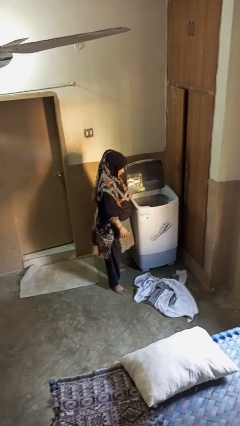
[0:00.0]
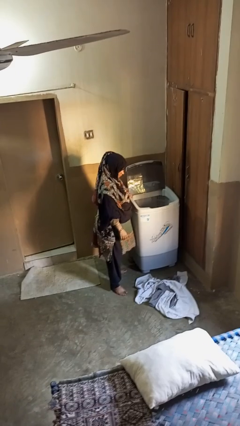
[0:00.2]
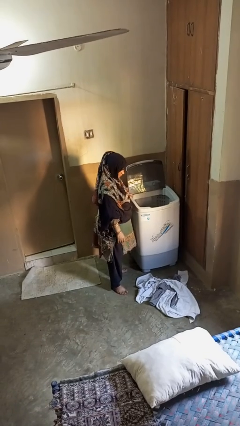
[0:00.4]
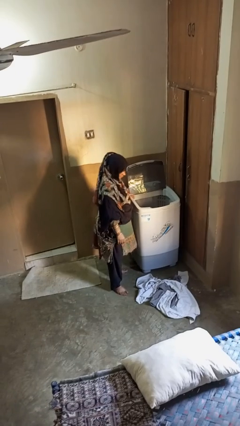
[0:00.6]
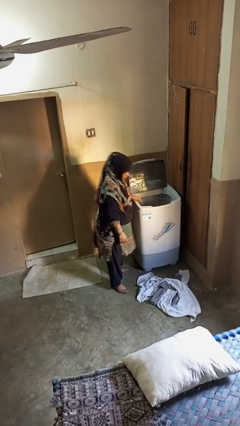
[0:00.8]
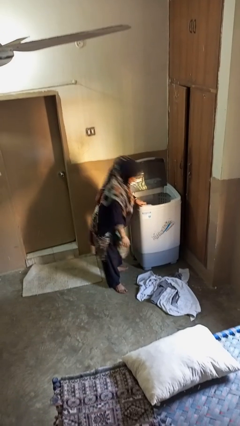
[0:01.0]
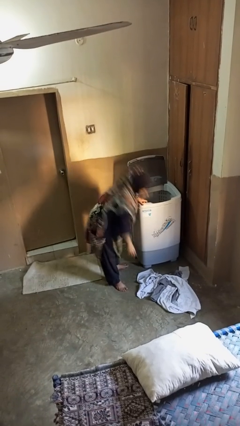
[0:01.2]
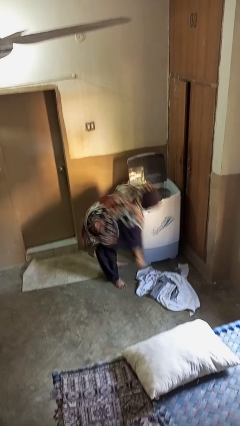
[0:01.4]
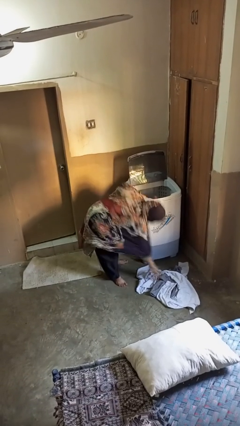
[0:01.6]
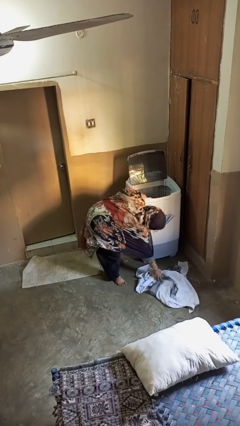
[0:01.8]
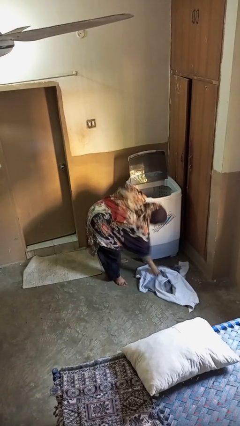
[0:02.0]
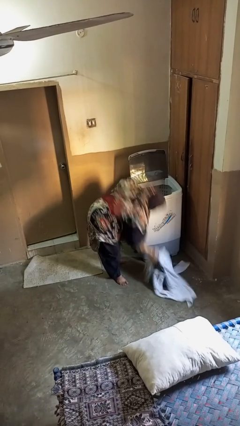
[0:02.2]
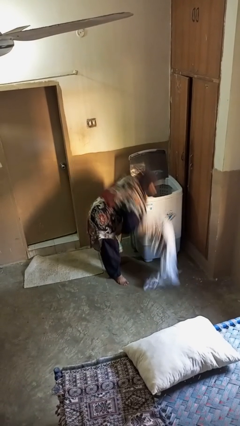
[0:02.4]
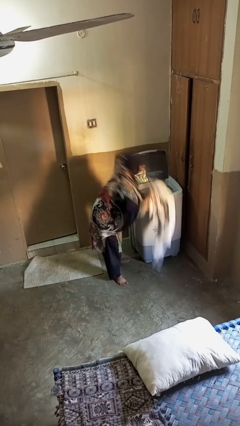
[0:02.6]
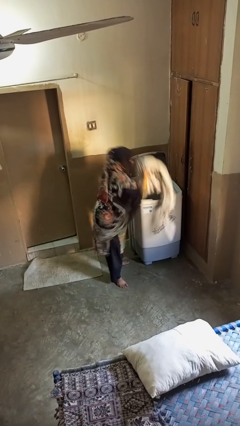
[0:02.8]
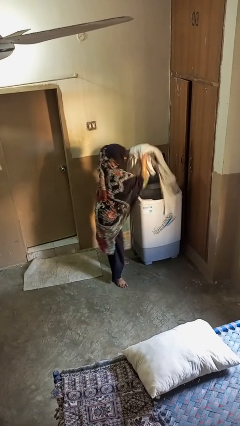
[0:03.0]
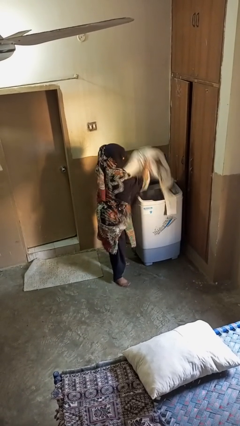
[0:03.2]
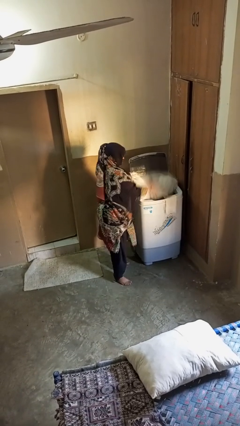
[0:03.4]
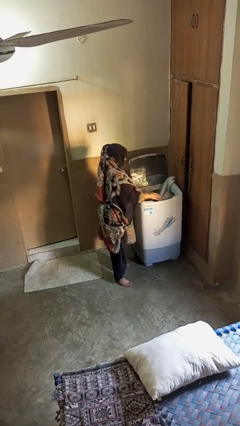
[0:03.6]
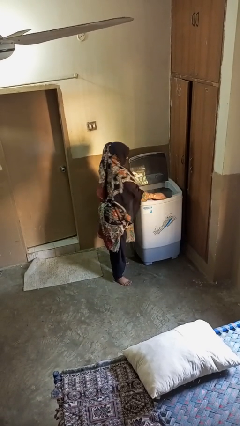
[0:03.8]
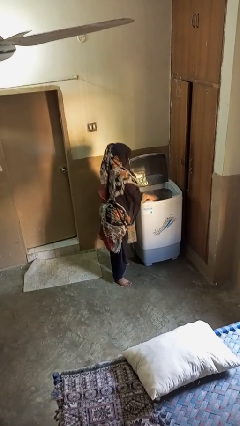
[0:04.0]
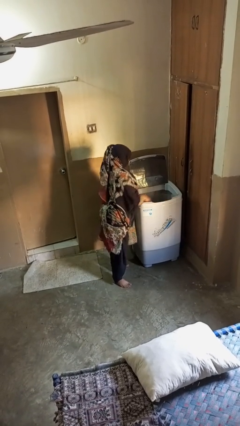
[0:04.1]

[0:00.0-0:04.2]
person loads clotheswasher

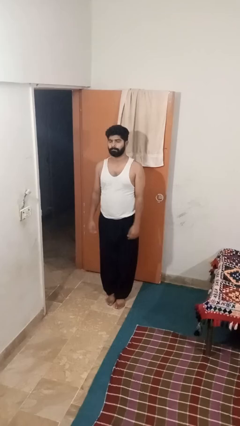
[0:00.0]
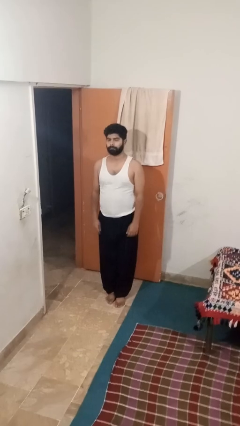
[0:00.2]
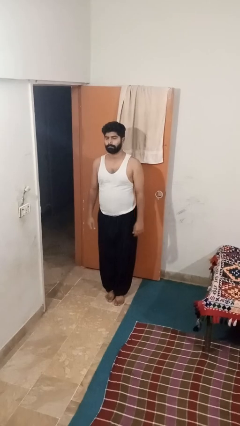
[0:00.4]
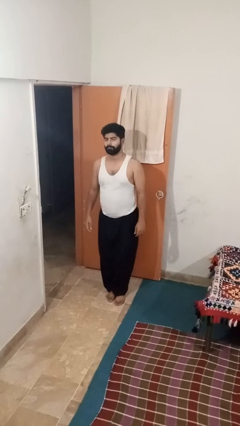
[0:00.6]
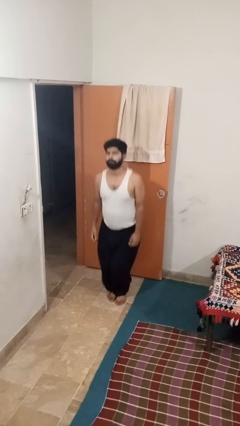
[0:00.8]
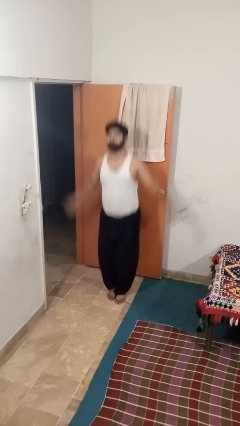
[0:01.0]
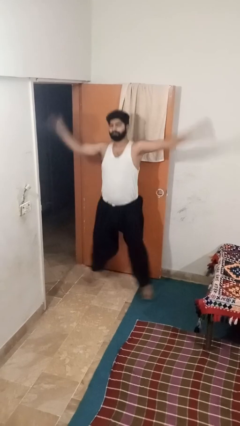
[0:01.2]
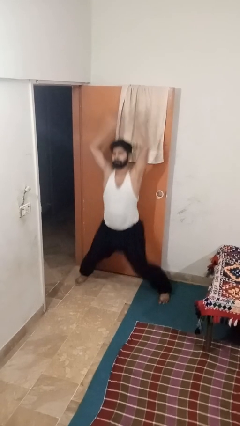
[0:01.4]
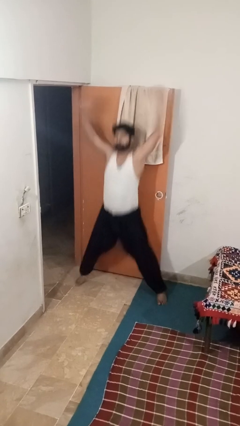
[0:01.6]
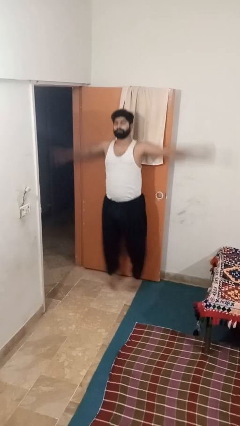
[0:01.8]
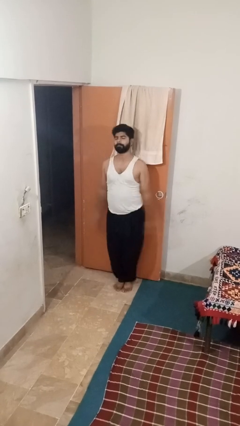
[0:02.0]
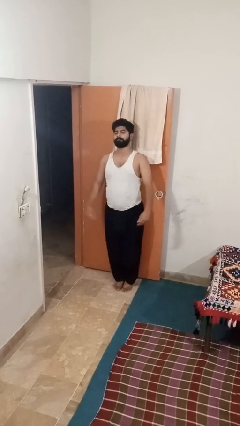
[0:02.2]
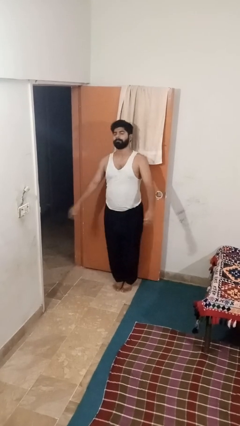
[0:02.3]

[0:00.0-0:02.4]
person exercises with jumping jacks

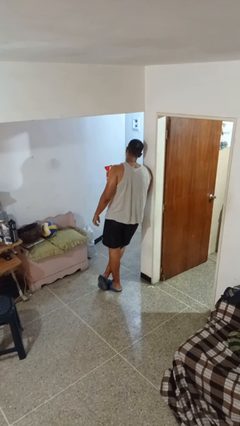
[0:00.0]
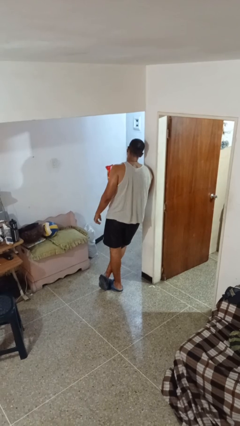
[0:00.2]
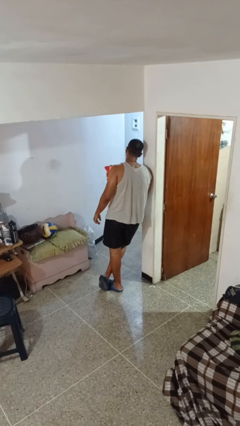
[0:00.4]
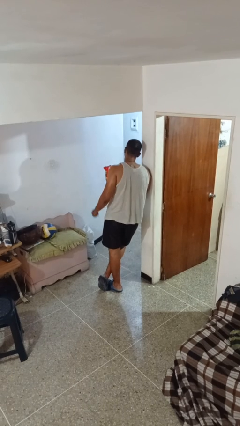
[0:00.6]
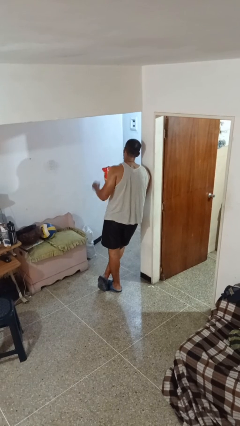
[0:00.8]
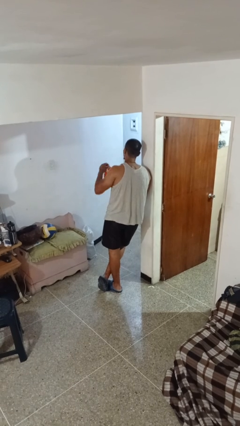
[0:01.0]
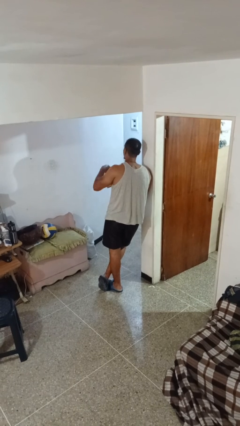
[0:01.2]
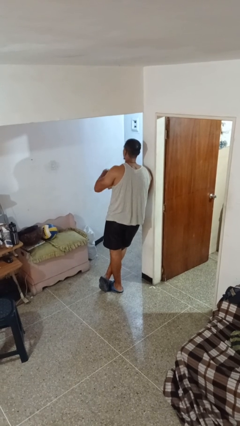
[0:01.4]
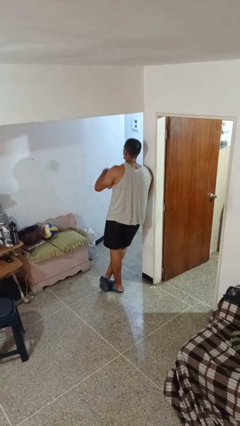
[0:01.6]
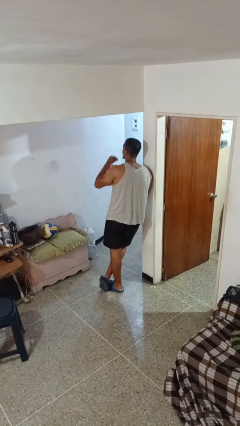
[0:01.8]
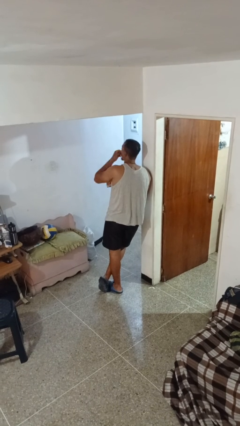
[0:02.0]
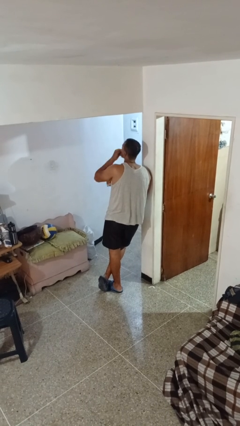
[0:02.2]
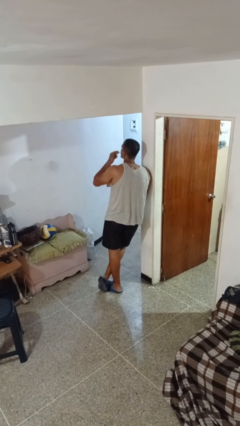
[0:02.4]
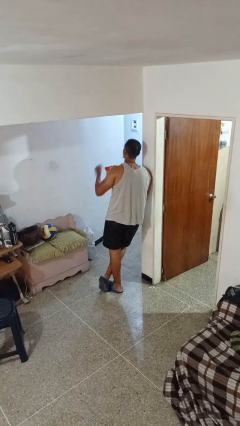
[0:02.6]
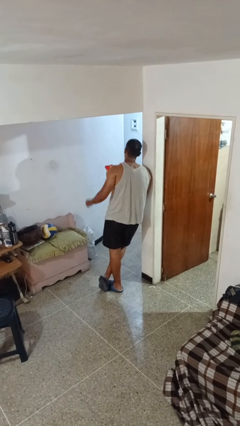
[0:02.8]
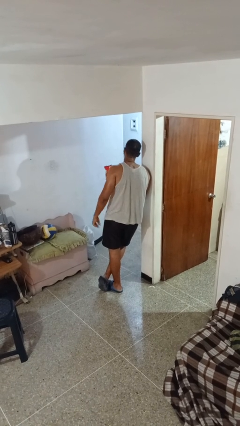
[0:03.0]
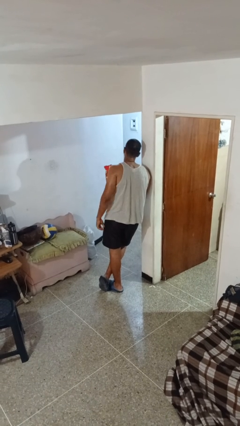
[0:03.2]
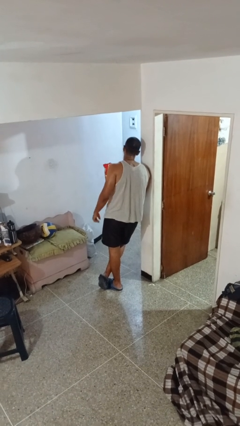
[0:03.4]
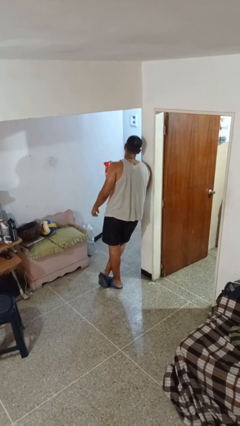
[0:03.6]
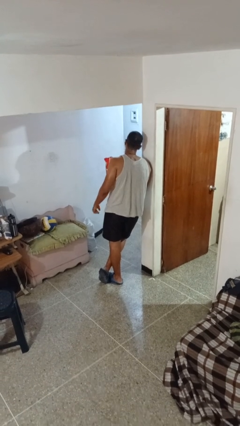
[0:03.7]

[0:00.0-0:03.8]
person eats snack from bag

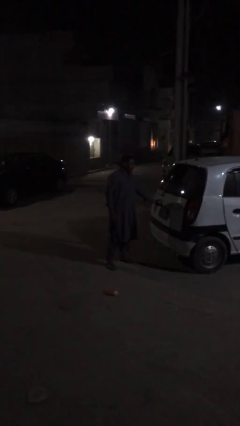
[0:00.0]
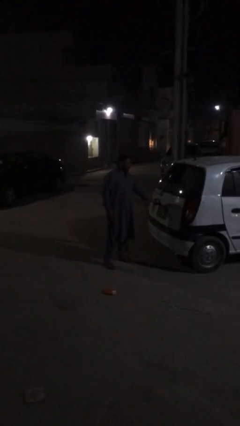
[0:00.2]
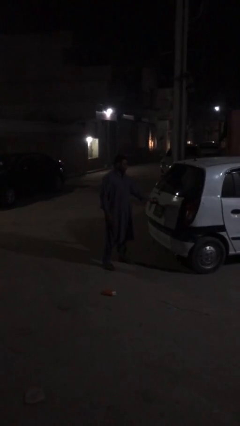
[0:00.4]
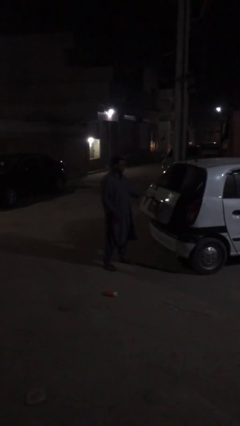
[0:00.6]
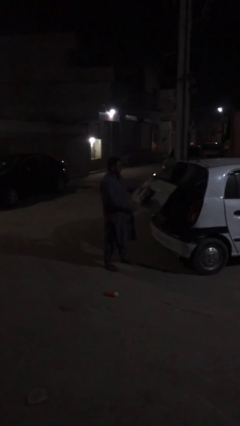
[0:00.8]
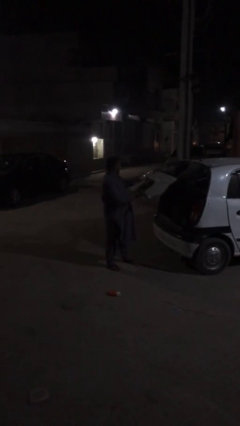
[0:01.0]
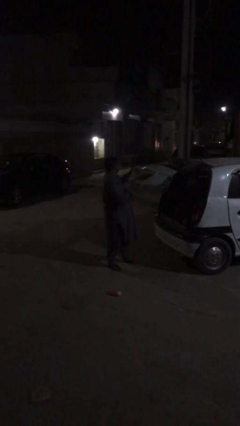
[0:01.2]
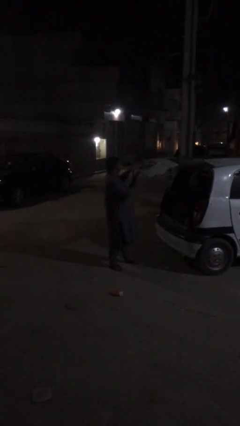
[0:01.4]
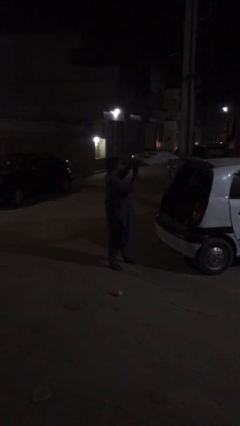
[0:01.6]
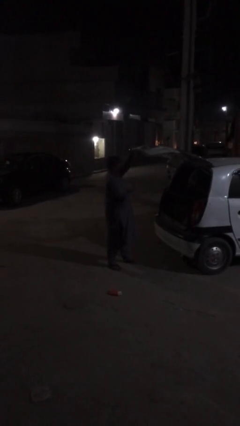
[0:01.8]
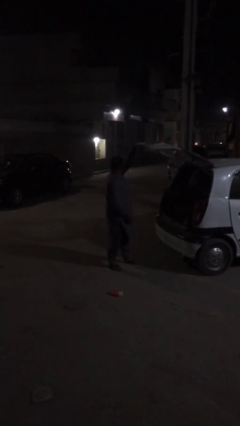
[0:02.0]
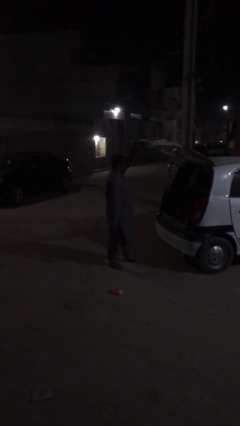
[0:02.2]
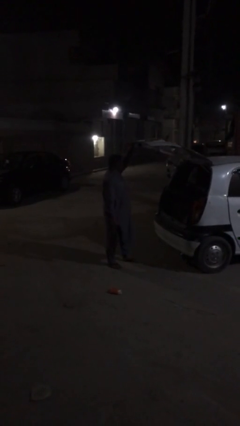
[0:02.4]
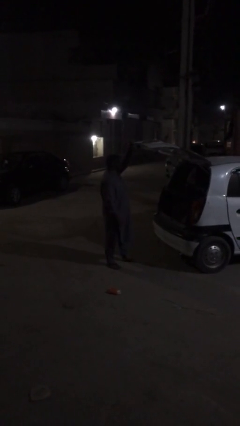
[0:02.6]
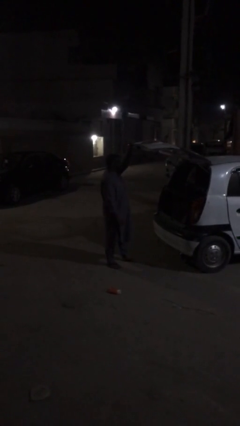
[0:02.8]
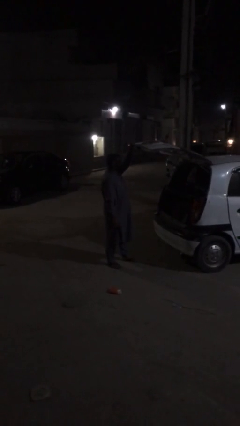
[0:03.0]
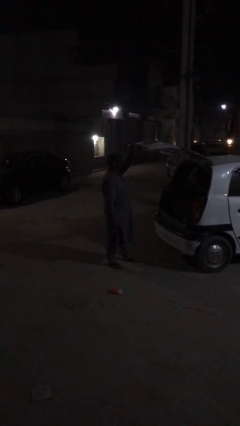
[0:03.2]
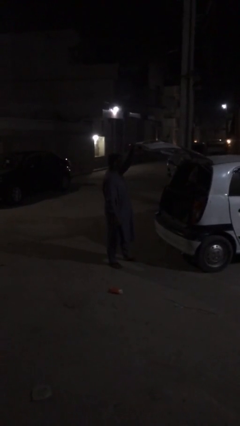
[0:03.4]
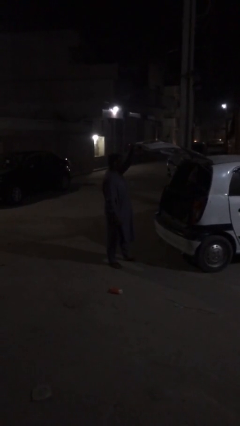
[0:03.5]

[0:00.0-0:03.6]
person opens car trunk

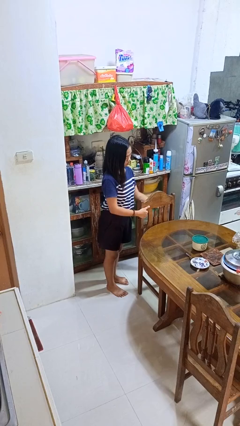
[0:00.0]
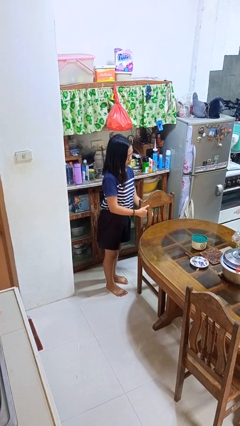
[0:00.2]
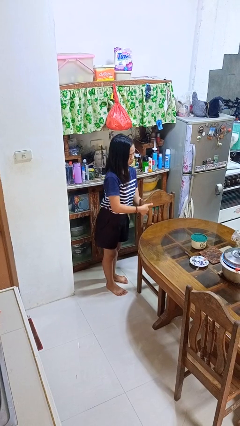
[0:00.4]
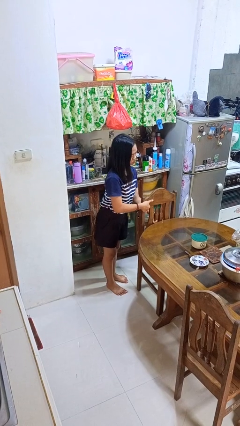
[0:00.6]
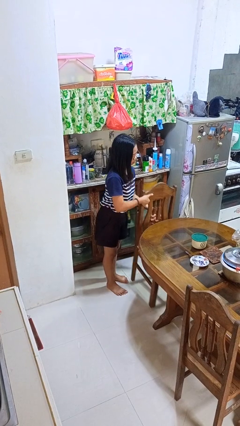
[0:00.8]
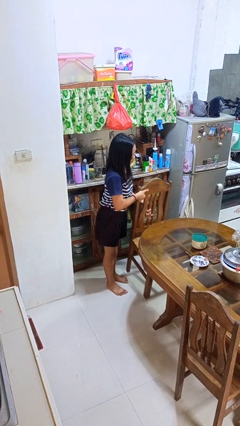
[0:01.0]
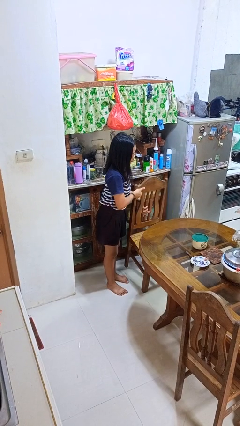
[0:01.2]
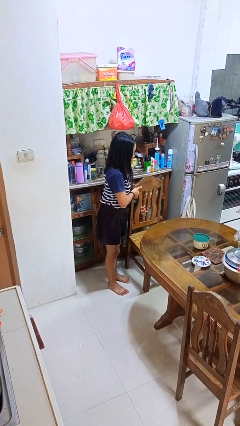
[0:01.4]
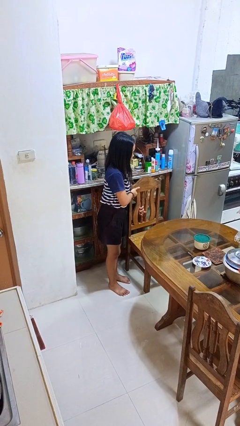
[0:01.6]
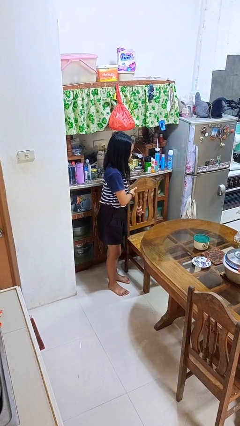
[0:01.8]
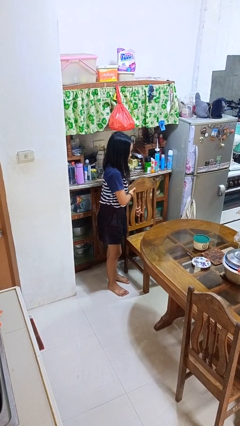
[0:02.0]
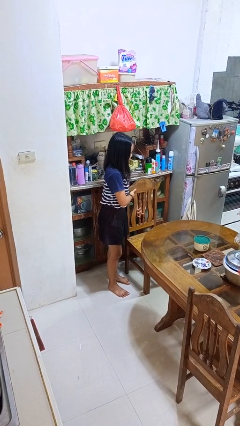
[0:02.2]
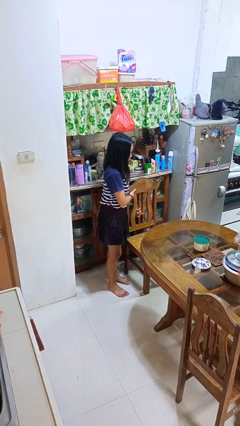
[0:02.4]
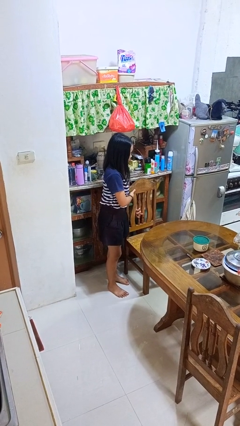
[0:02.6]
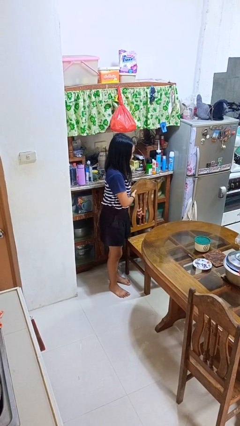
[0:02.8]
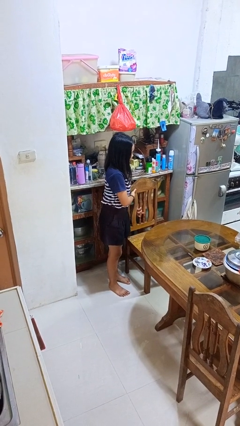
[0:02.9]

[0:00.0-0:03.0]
person pulls out chair

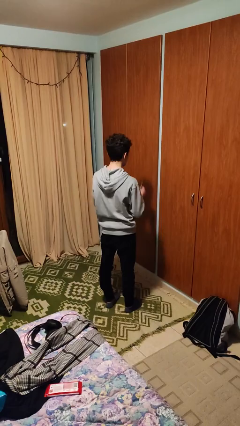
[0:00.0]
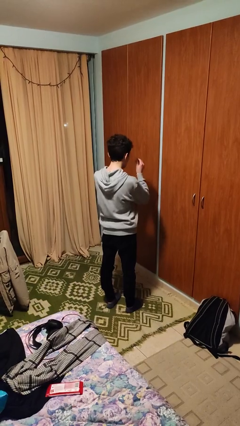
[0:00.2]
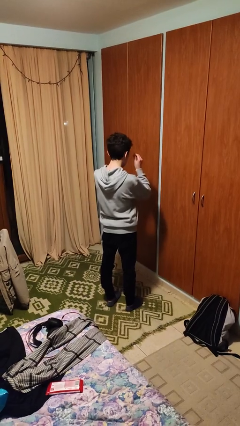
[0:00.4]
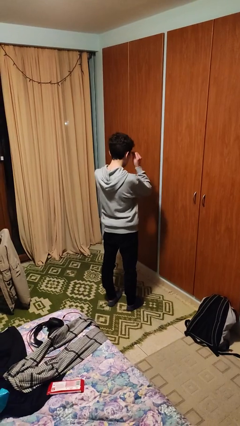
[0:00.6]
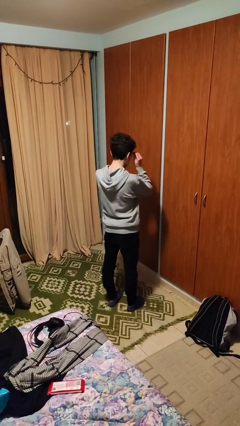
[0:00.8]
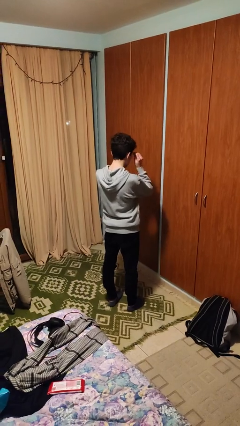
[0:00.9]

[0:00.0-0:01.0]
person puts on glasses
